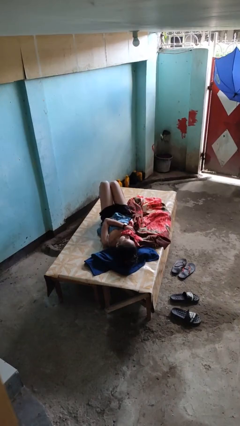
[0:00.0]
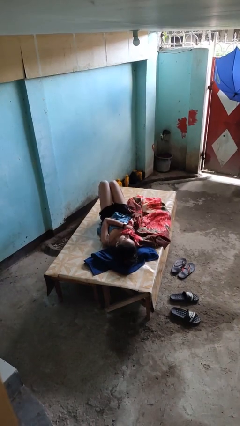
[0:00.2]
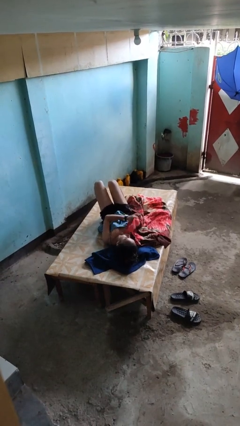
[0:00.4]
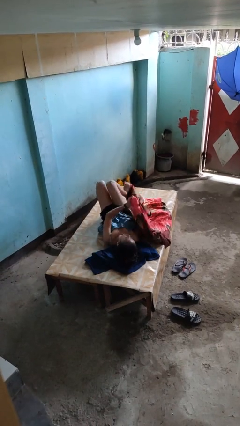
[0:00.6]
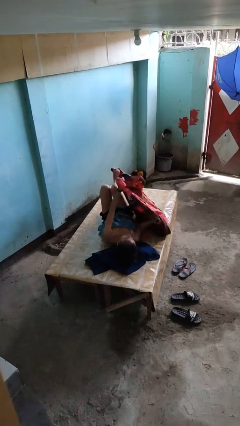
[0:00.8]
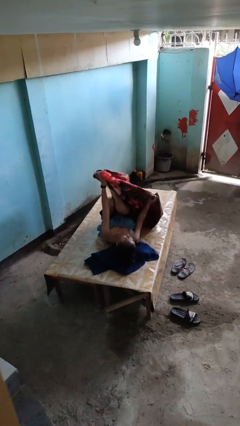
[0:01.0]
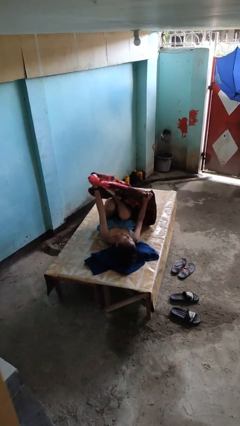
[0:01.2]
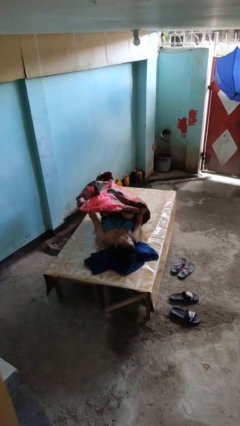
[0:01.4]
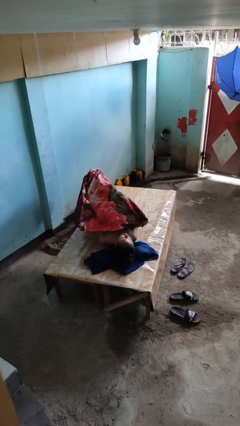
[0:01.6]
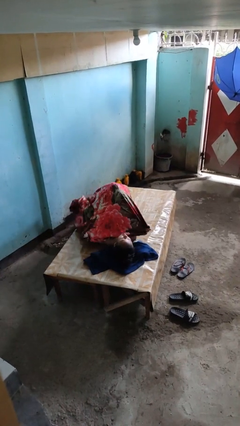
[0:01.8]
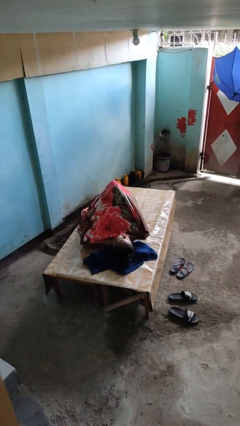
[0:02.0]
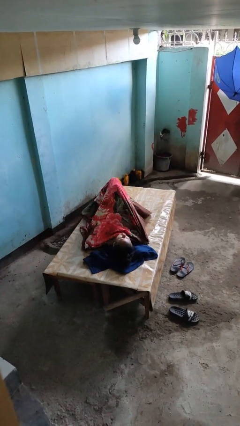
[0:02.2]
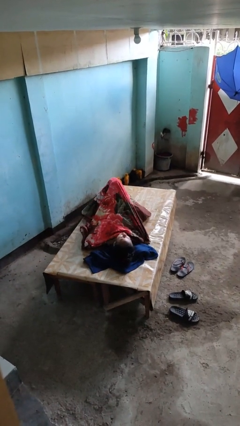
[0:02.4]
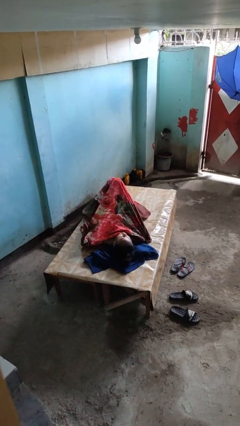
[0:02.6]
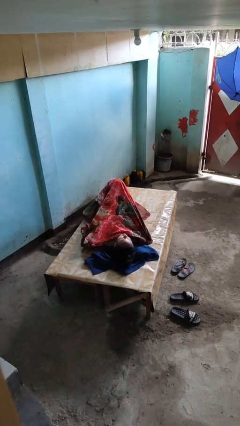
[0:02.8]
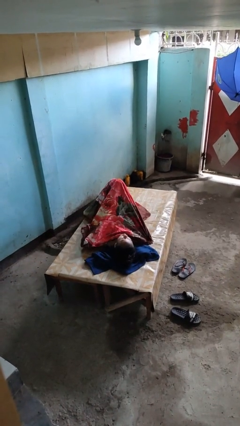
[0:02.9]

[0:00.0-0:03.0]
person covers with blanket

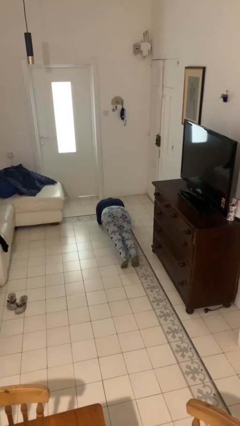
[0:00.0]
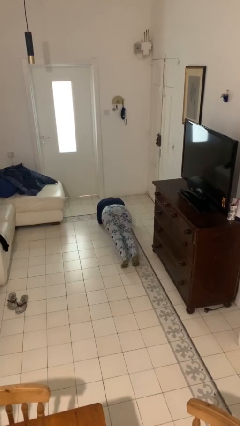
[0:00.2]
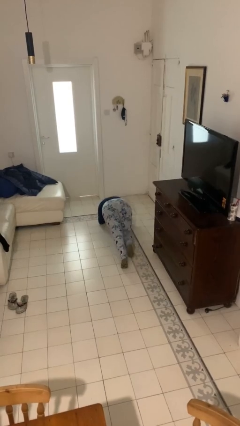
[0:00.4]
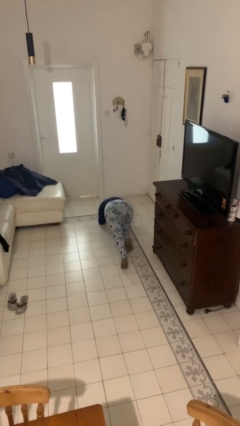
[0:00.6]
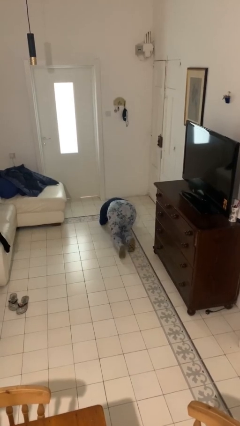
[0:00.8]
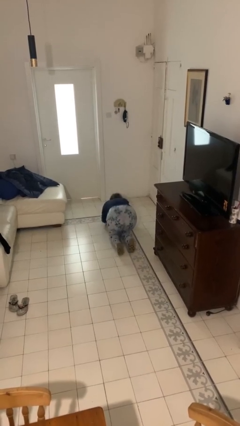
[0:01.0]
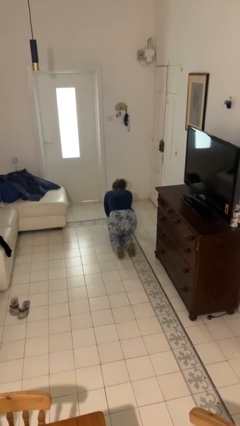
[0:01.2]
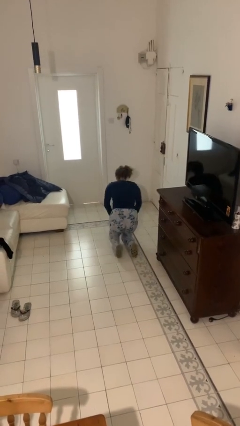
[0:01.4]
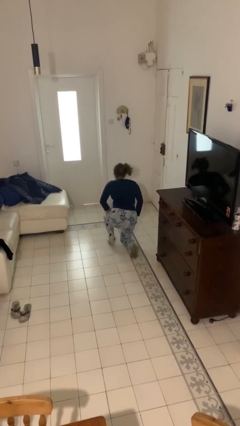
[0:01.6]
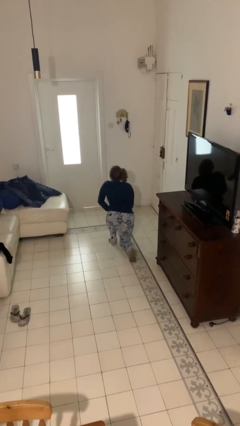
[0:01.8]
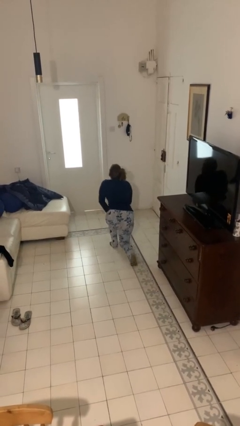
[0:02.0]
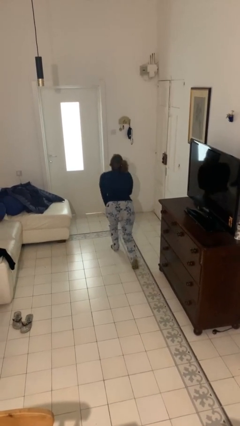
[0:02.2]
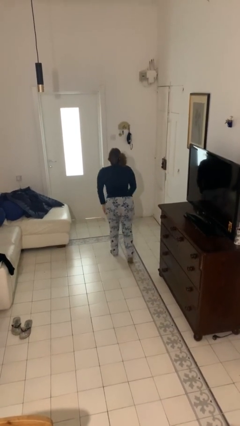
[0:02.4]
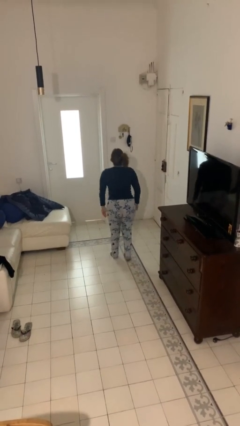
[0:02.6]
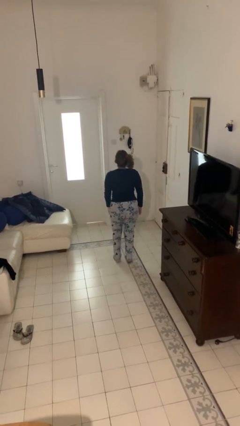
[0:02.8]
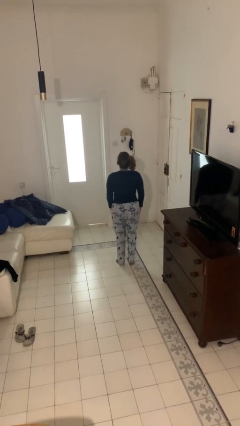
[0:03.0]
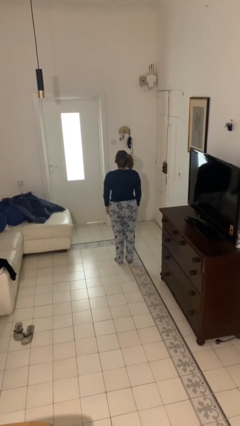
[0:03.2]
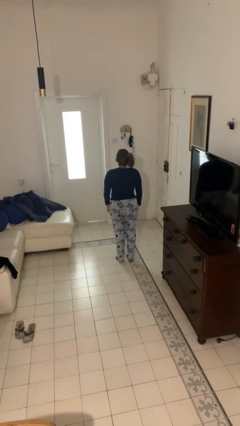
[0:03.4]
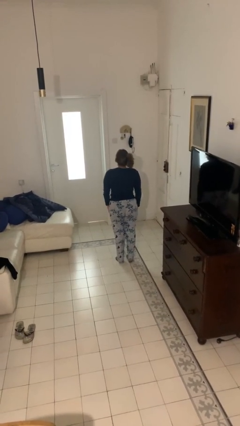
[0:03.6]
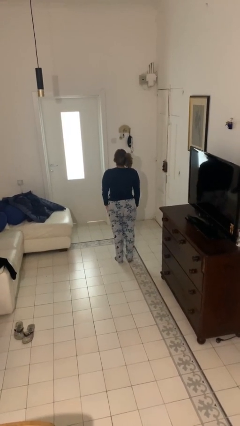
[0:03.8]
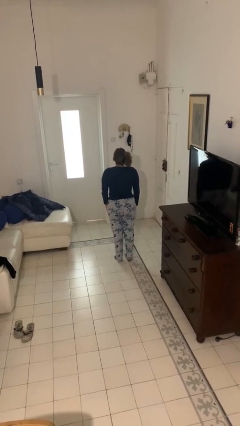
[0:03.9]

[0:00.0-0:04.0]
person stands up from floor

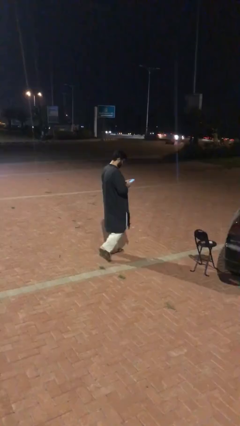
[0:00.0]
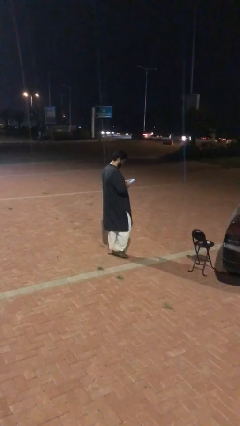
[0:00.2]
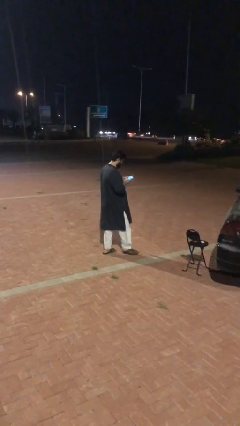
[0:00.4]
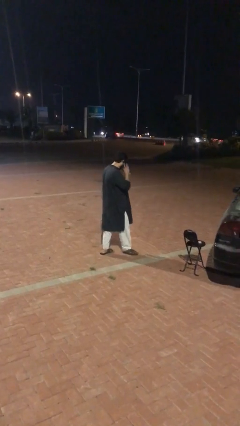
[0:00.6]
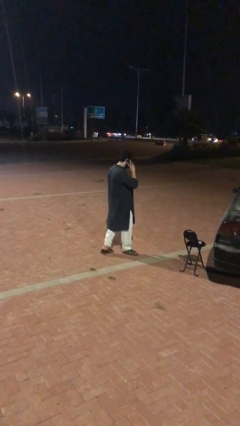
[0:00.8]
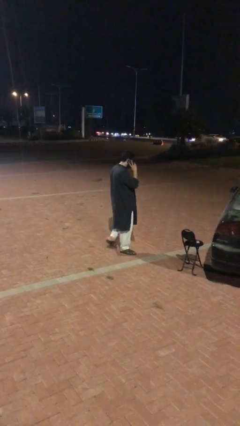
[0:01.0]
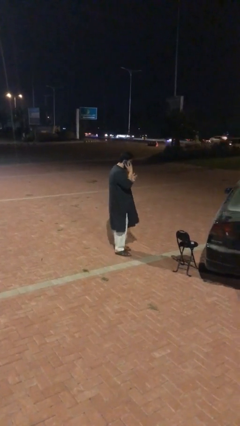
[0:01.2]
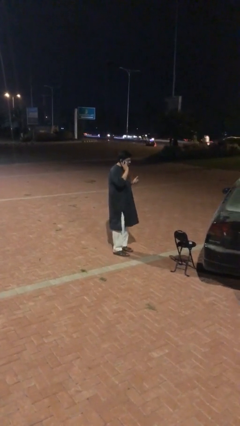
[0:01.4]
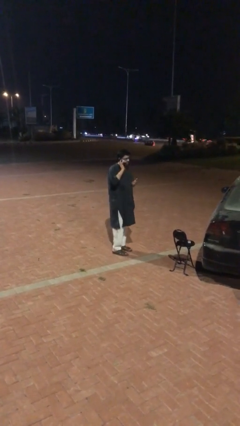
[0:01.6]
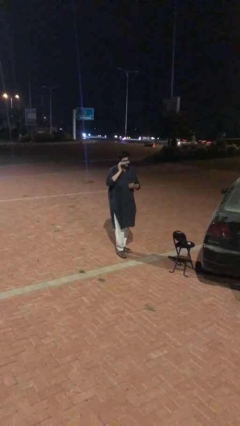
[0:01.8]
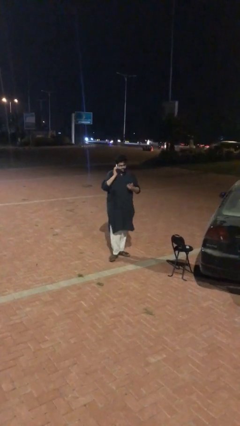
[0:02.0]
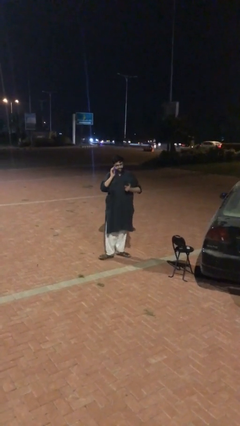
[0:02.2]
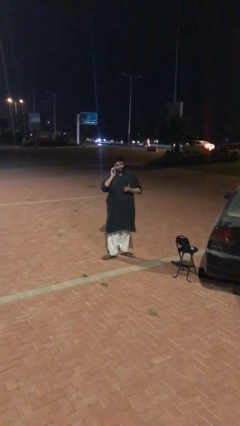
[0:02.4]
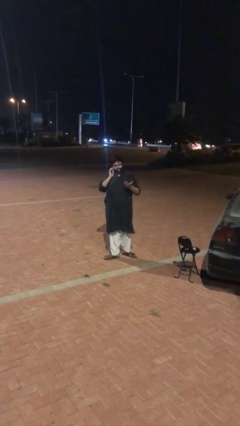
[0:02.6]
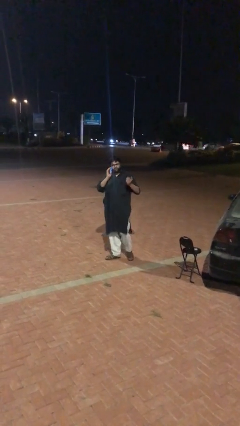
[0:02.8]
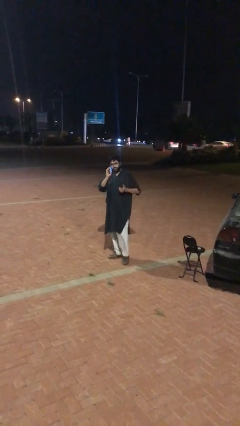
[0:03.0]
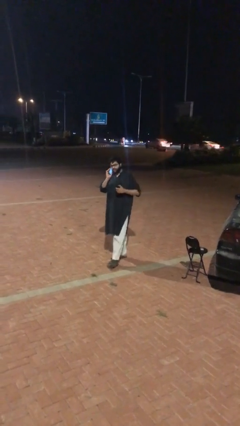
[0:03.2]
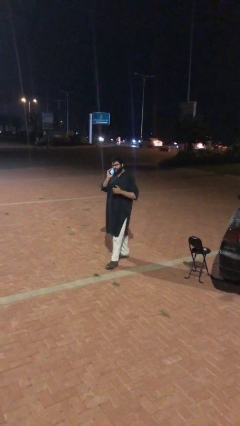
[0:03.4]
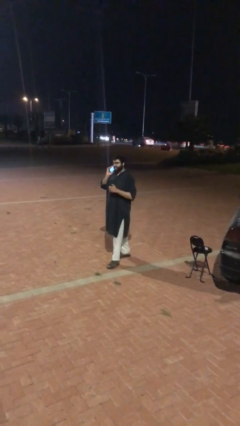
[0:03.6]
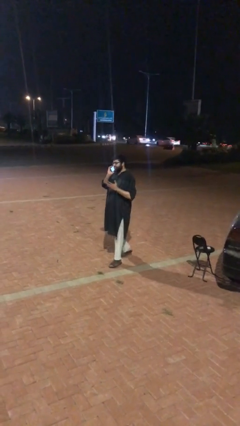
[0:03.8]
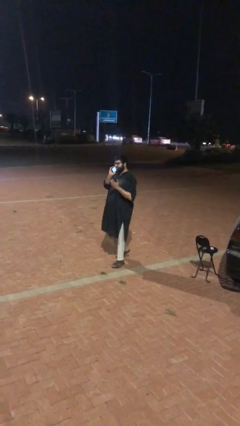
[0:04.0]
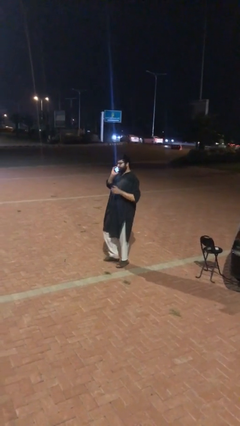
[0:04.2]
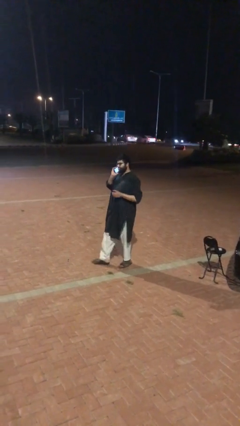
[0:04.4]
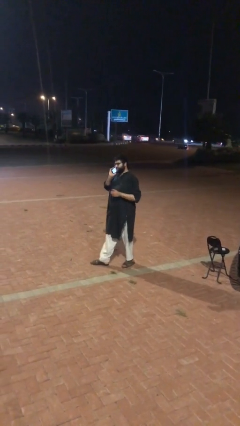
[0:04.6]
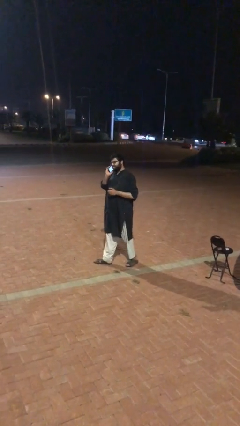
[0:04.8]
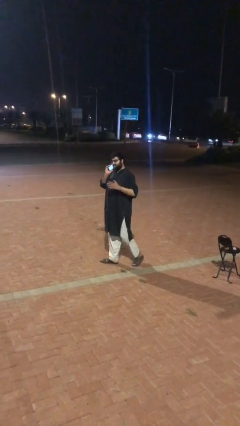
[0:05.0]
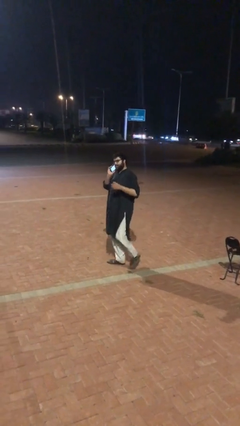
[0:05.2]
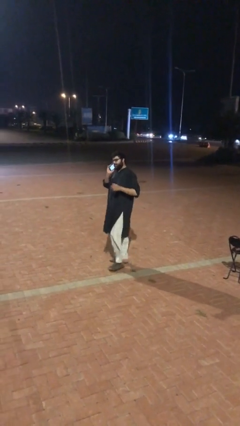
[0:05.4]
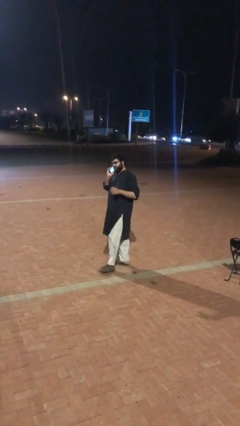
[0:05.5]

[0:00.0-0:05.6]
person talks on phone

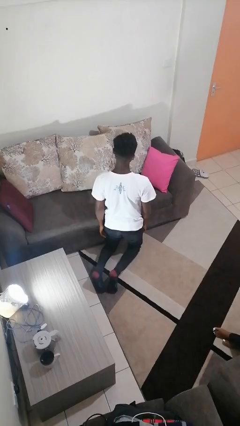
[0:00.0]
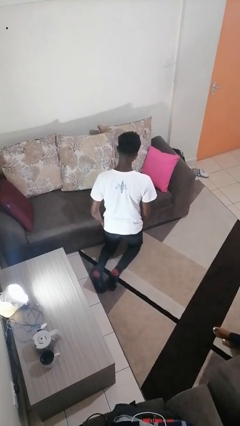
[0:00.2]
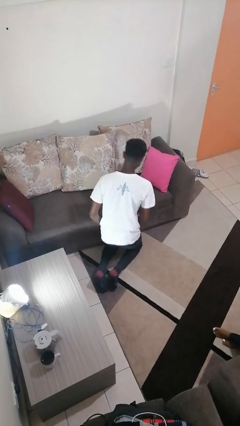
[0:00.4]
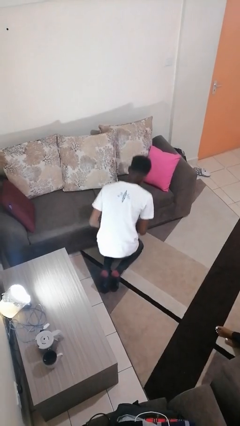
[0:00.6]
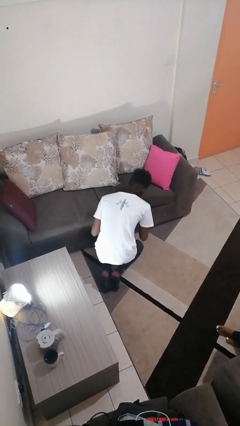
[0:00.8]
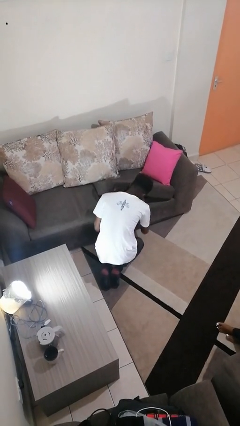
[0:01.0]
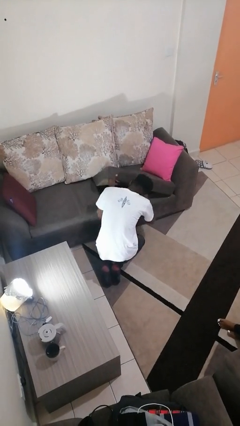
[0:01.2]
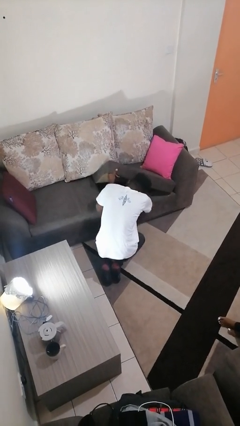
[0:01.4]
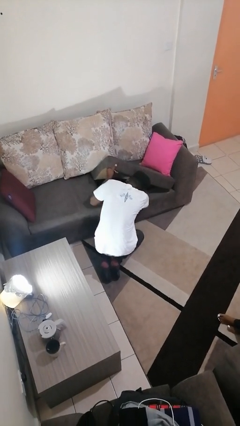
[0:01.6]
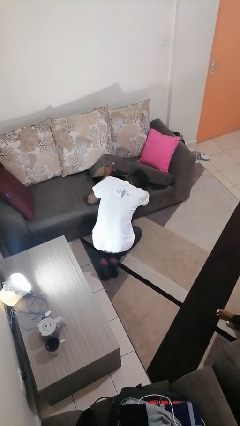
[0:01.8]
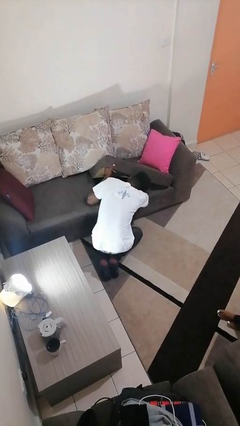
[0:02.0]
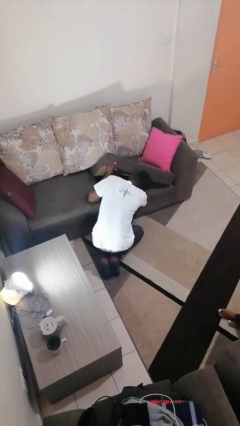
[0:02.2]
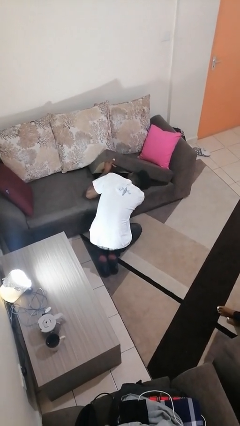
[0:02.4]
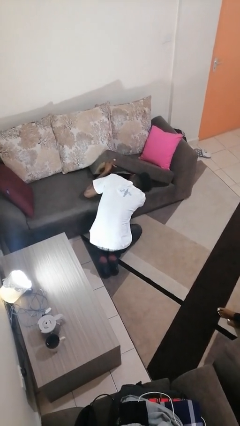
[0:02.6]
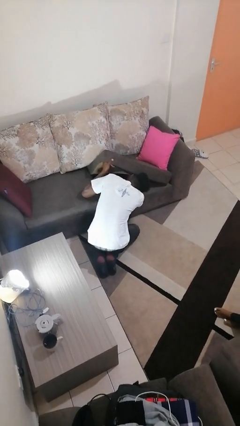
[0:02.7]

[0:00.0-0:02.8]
person searches under couch

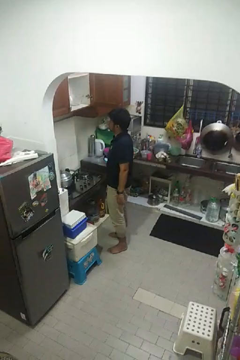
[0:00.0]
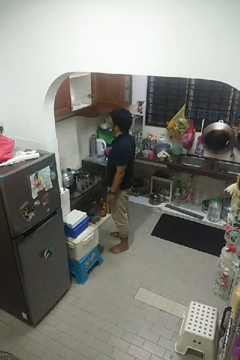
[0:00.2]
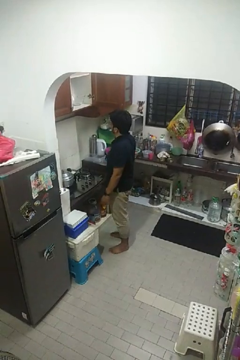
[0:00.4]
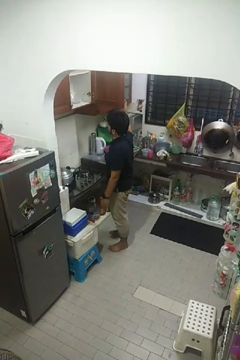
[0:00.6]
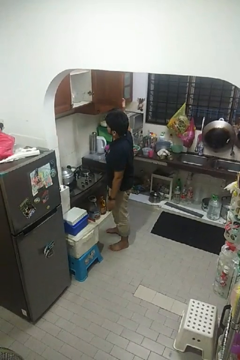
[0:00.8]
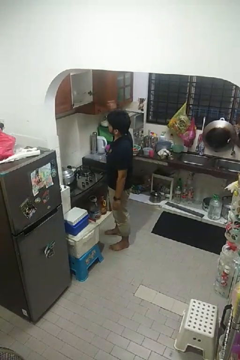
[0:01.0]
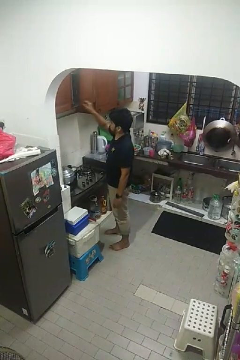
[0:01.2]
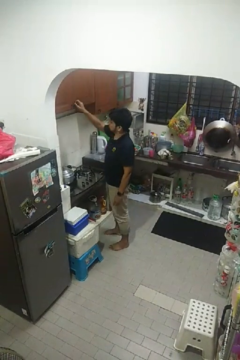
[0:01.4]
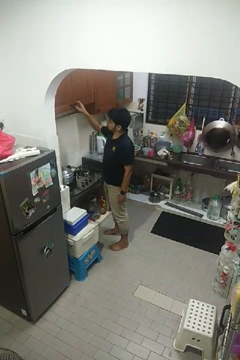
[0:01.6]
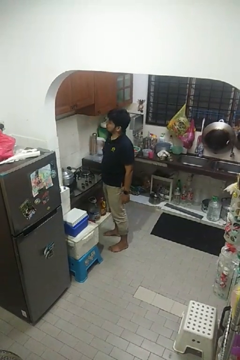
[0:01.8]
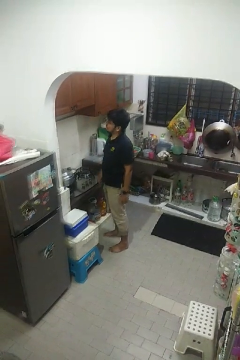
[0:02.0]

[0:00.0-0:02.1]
person closes cabinet

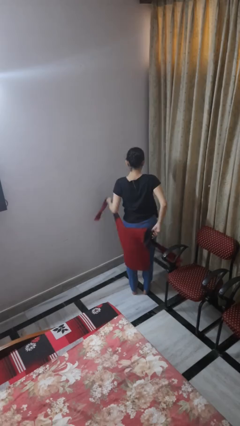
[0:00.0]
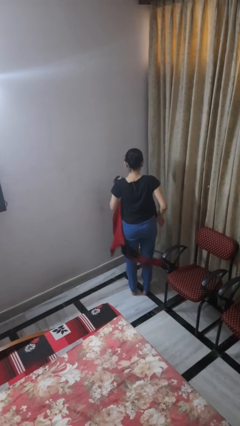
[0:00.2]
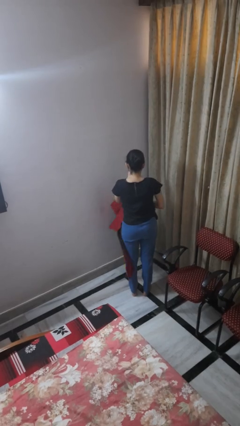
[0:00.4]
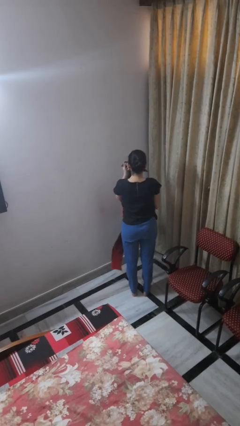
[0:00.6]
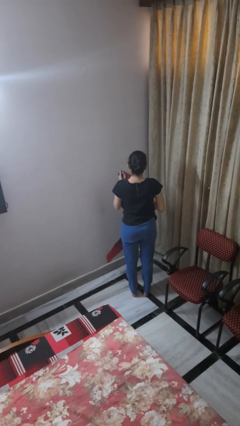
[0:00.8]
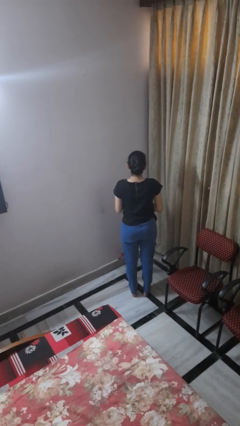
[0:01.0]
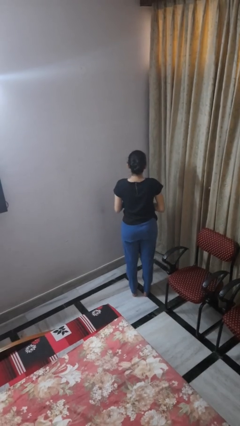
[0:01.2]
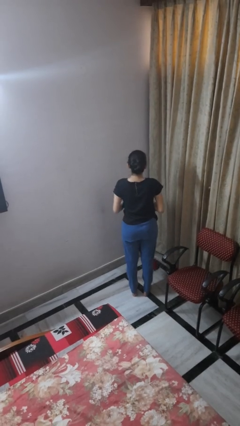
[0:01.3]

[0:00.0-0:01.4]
person unties jacket around waist
